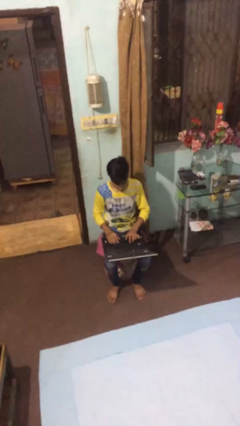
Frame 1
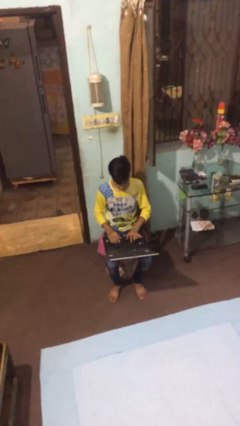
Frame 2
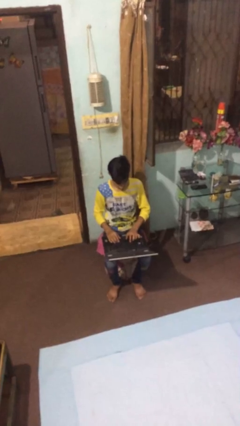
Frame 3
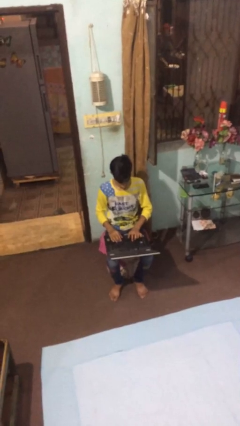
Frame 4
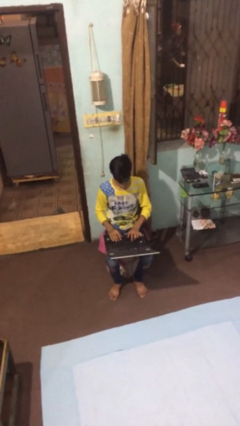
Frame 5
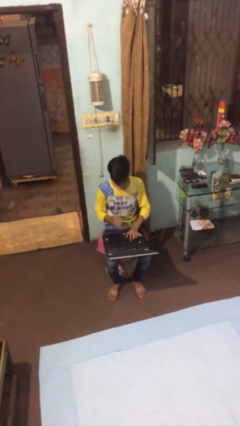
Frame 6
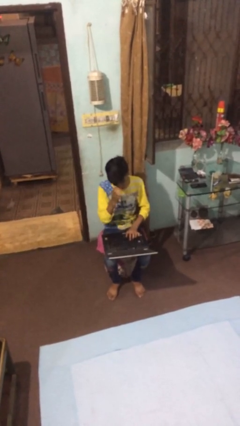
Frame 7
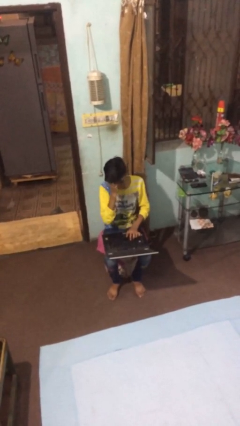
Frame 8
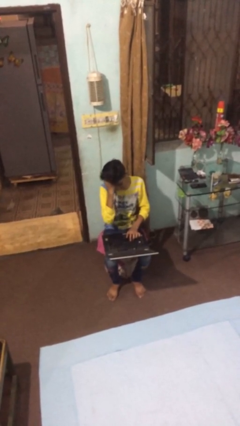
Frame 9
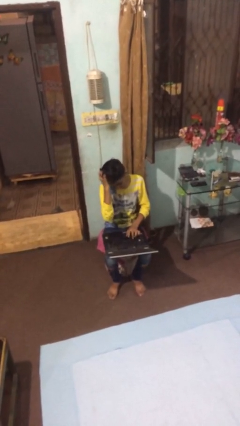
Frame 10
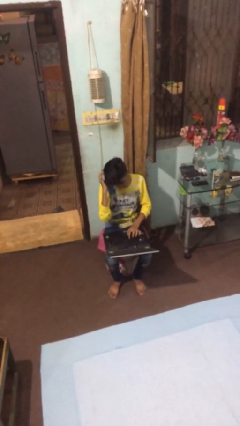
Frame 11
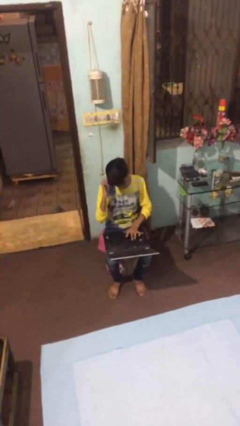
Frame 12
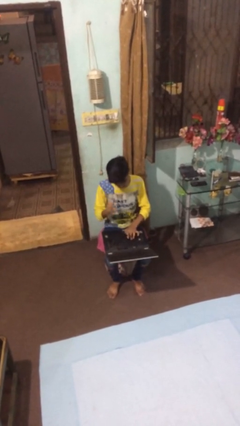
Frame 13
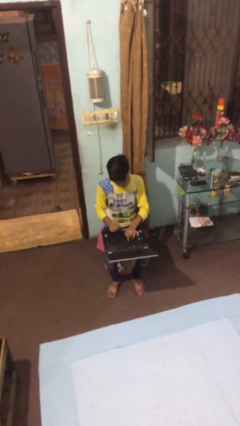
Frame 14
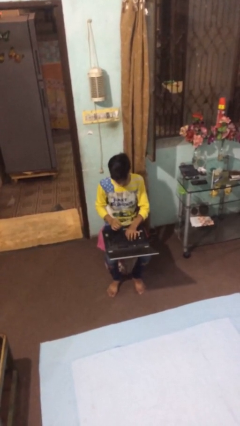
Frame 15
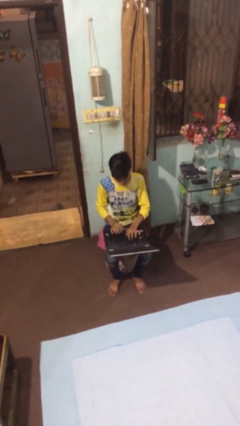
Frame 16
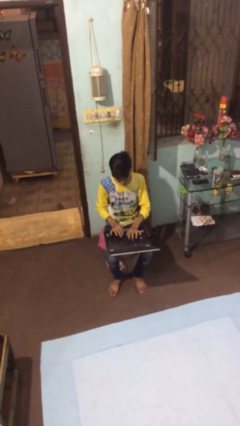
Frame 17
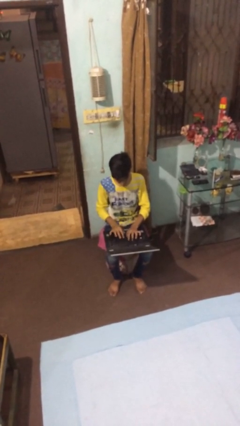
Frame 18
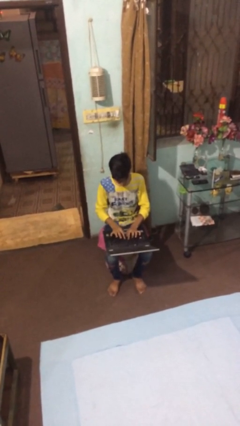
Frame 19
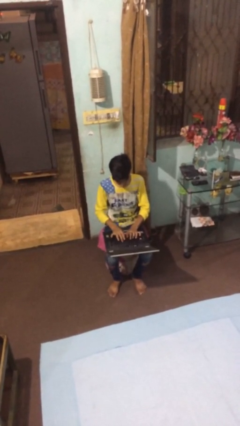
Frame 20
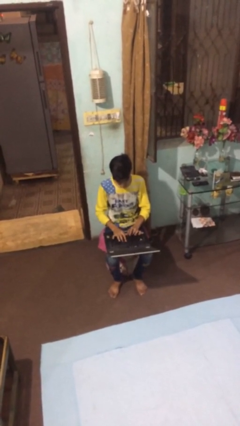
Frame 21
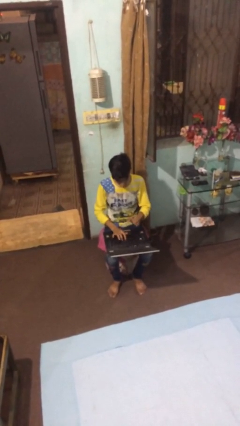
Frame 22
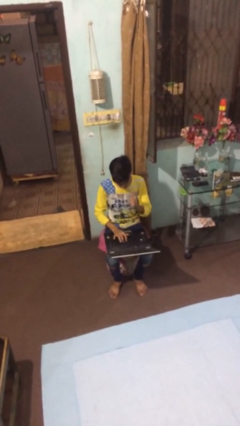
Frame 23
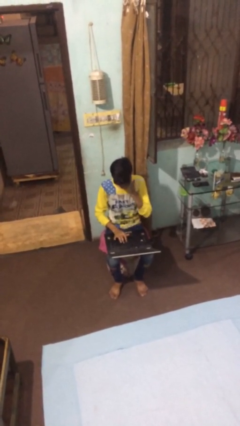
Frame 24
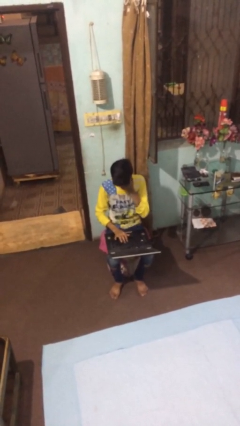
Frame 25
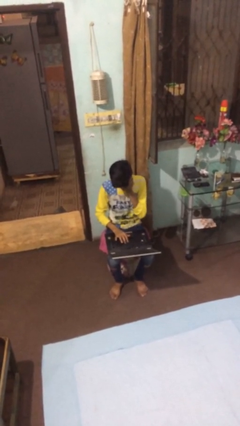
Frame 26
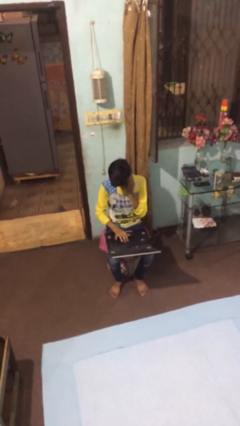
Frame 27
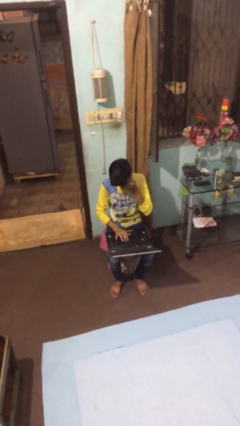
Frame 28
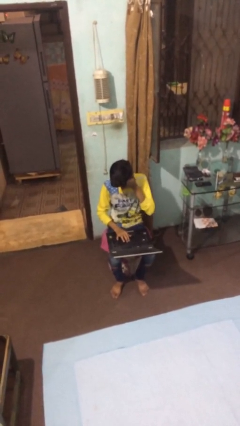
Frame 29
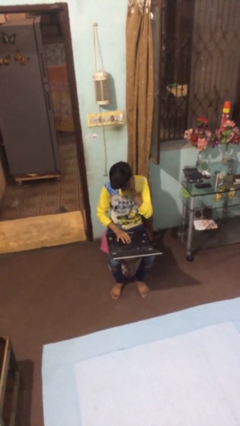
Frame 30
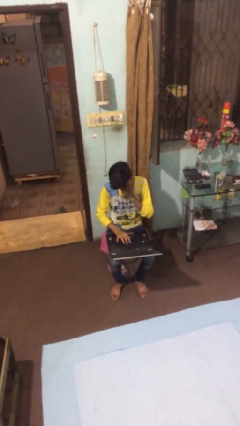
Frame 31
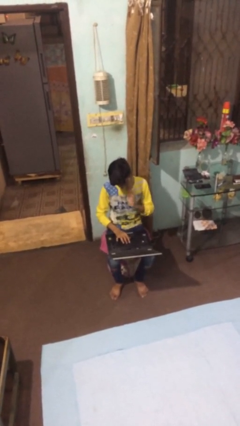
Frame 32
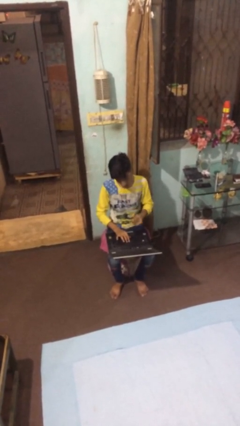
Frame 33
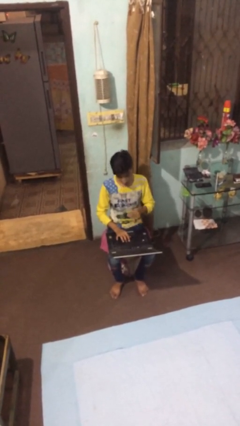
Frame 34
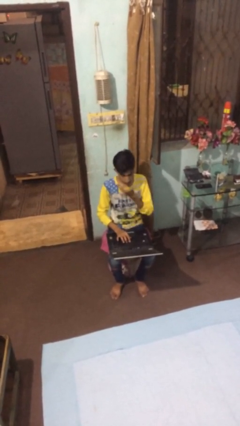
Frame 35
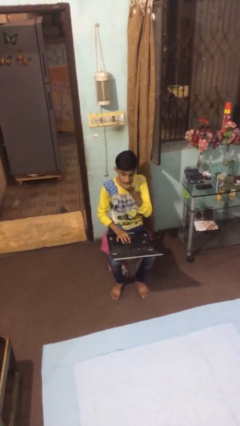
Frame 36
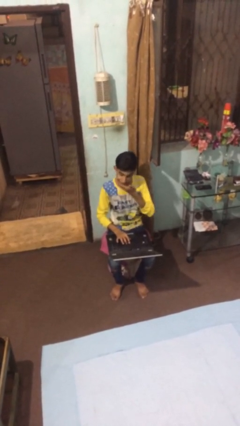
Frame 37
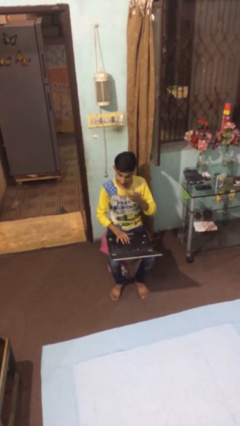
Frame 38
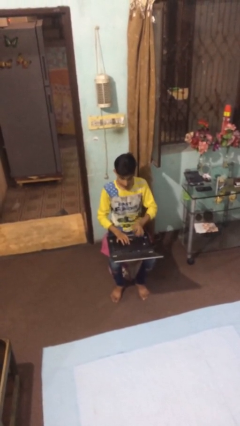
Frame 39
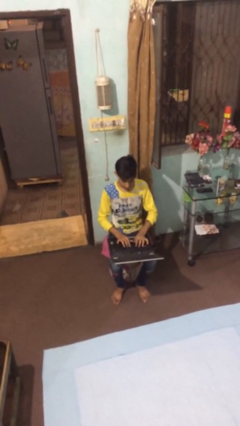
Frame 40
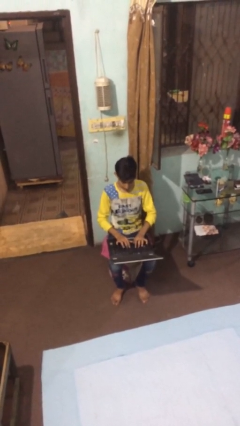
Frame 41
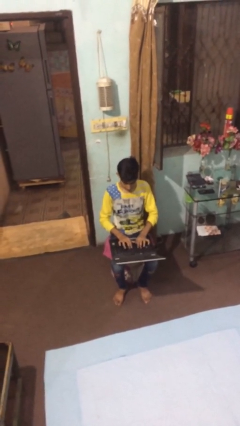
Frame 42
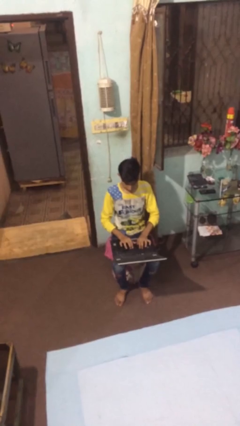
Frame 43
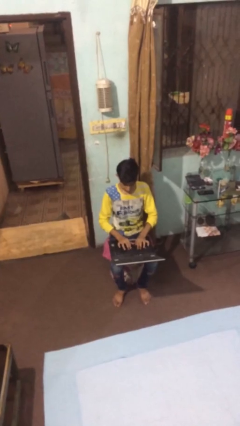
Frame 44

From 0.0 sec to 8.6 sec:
person interacts with laptop

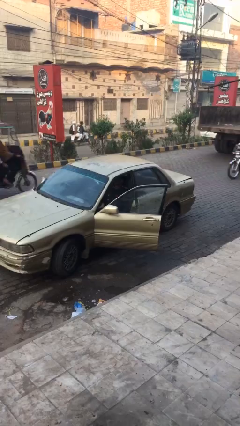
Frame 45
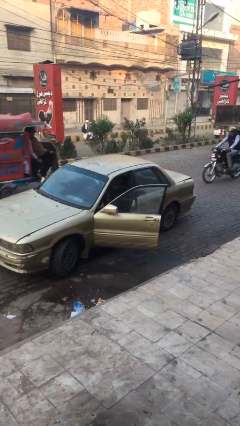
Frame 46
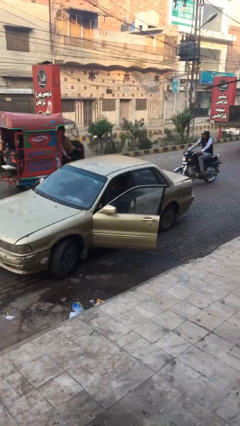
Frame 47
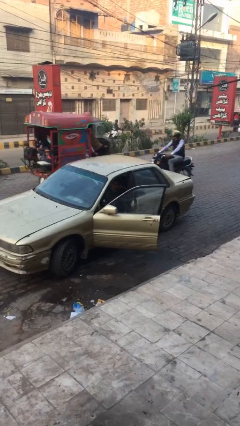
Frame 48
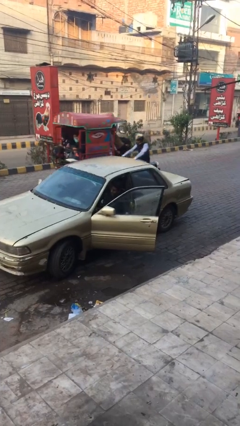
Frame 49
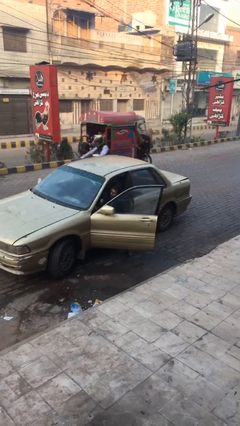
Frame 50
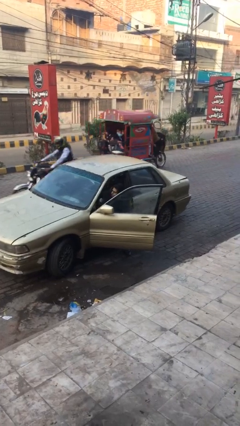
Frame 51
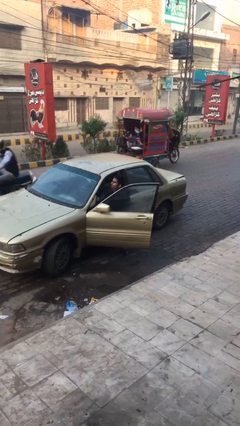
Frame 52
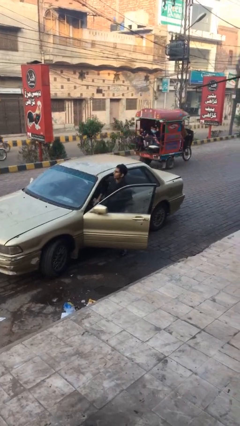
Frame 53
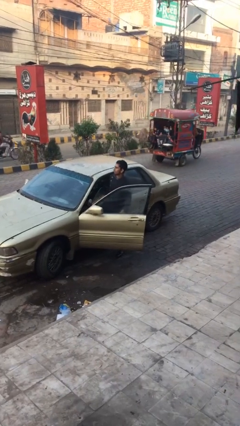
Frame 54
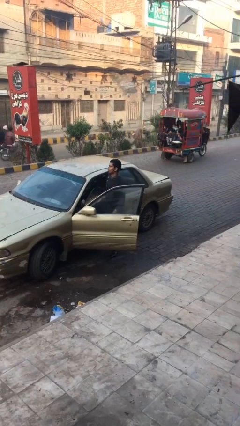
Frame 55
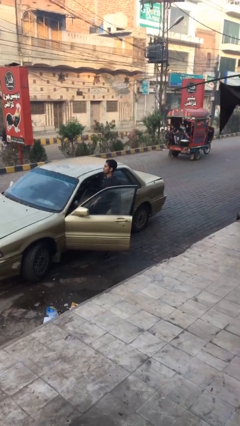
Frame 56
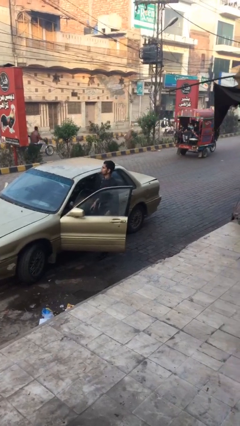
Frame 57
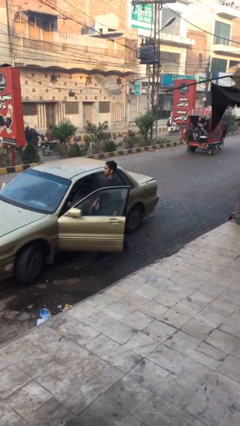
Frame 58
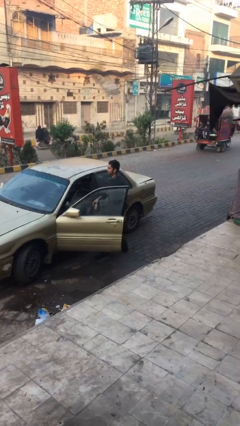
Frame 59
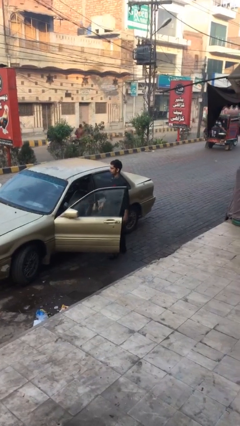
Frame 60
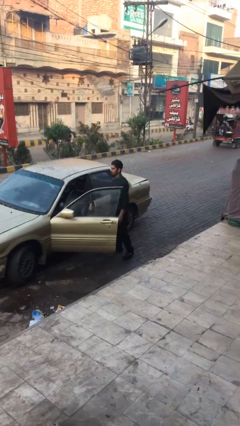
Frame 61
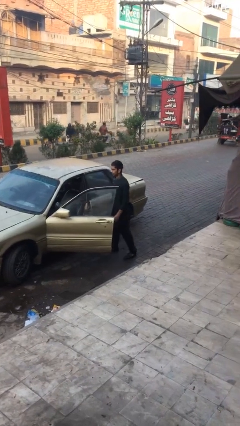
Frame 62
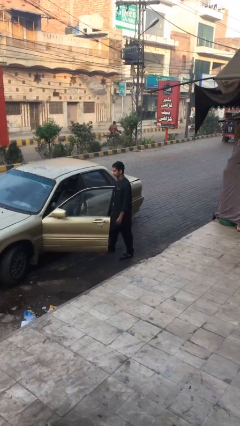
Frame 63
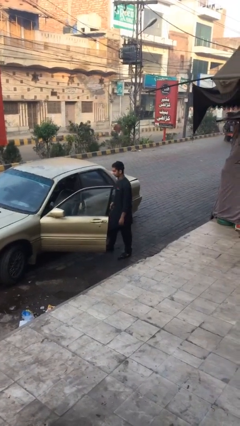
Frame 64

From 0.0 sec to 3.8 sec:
person exits car

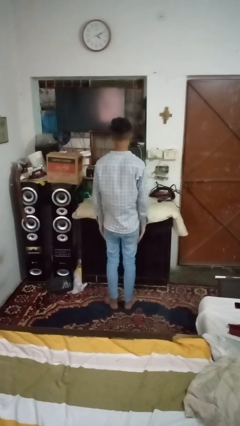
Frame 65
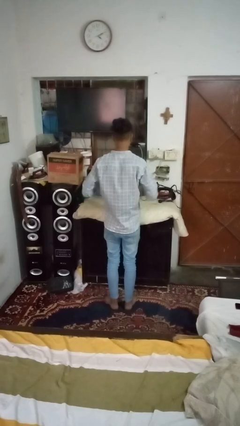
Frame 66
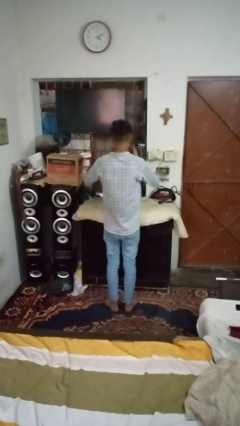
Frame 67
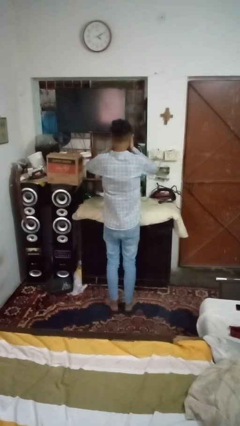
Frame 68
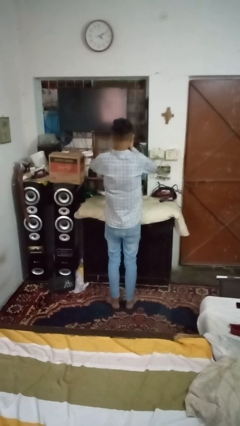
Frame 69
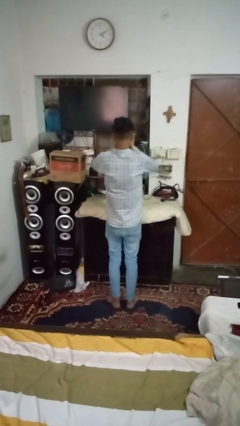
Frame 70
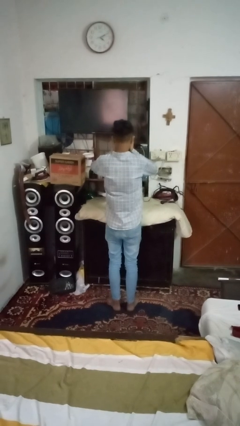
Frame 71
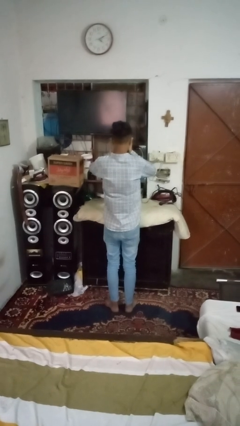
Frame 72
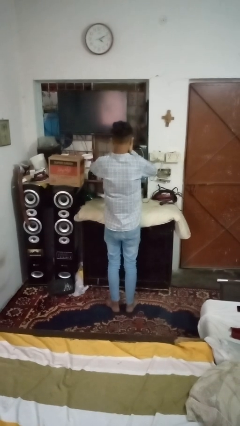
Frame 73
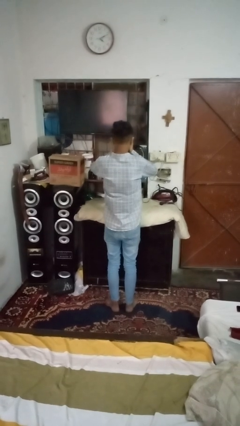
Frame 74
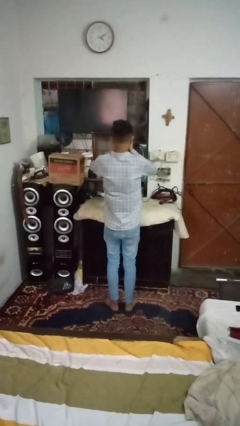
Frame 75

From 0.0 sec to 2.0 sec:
person covers face with hands

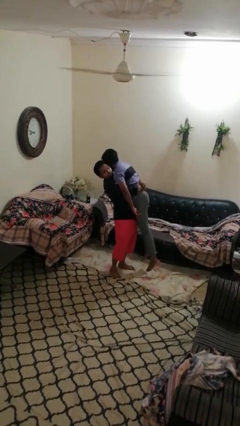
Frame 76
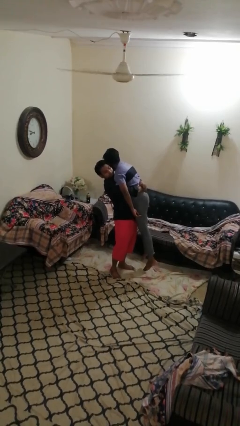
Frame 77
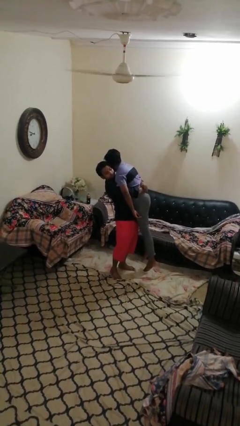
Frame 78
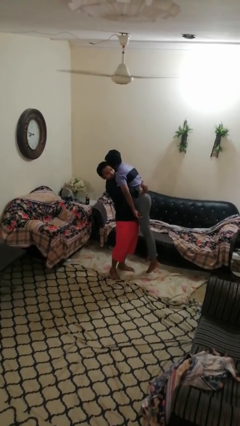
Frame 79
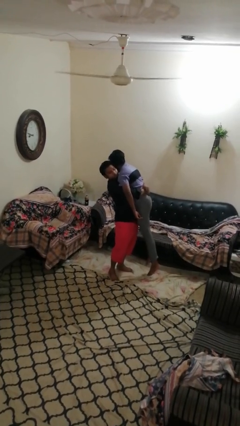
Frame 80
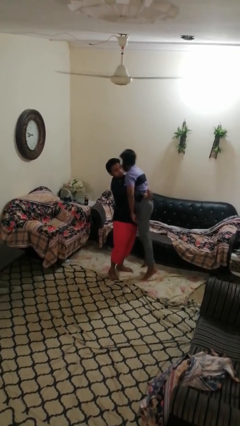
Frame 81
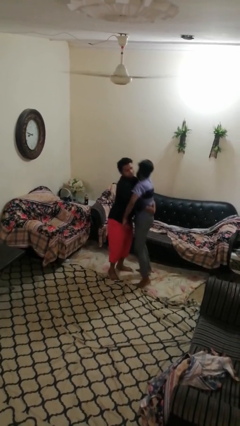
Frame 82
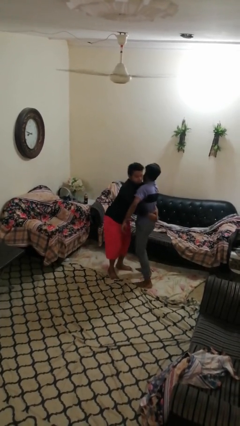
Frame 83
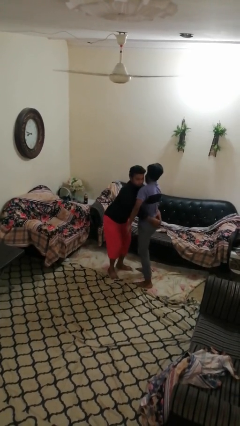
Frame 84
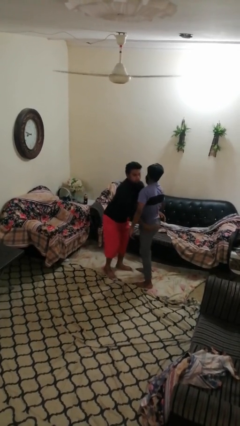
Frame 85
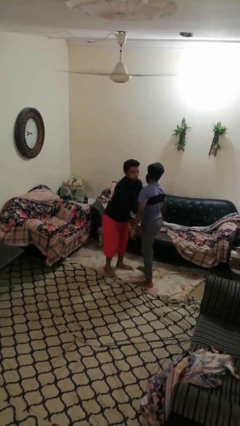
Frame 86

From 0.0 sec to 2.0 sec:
person puts down person

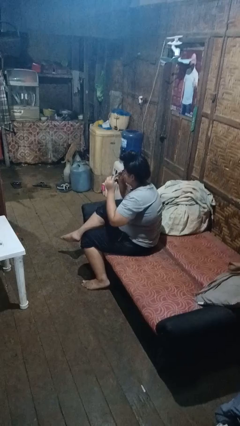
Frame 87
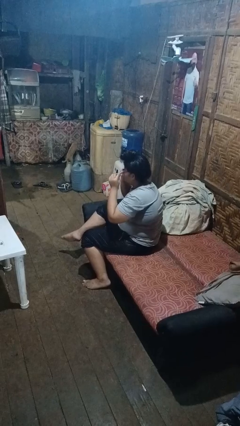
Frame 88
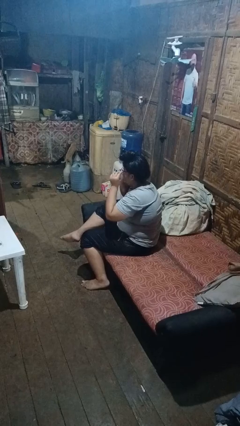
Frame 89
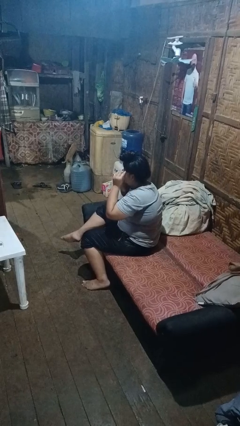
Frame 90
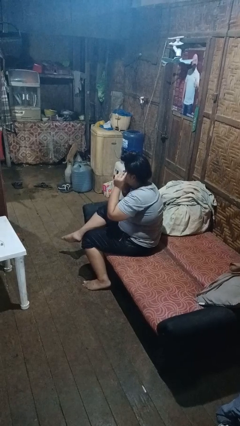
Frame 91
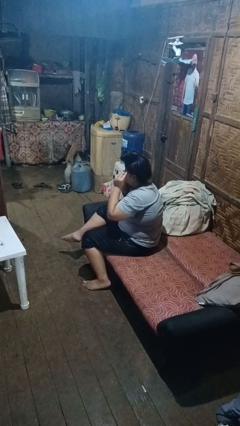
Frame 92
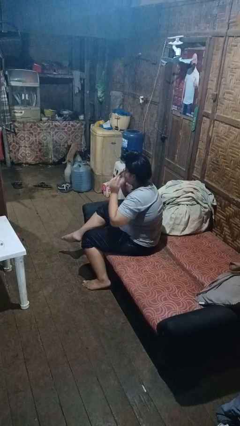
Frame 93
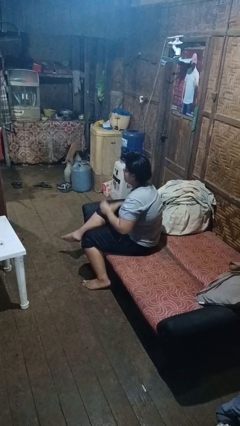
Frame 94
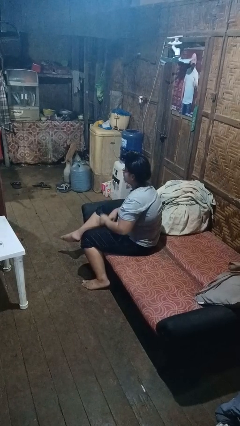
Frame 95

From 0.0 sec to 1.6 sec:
person puts on glasses
